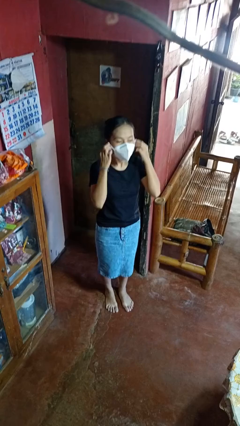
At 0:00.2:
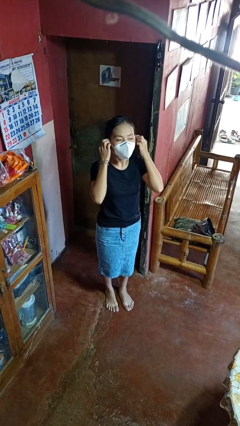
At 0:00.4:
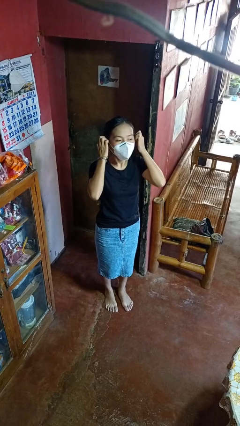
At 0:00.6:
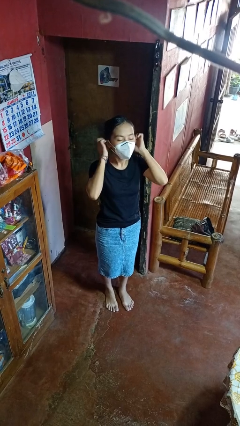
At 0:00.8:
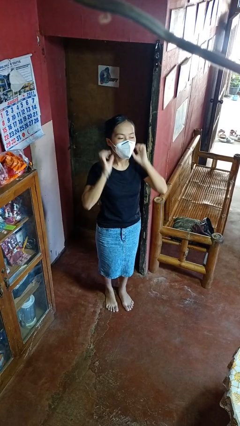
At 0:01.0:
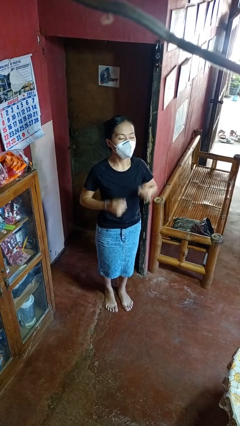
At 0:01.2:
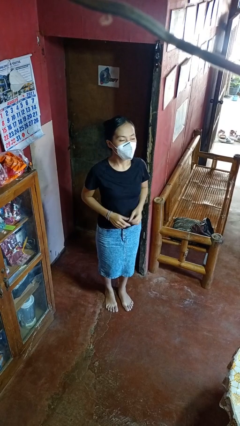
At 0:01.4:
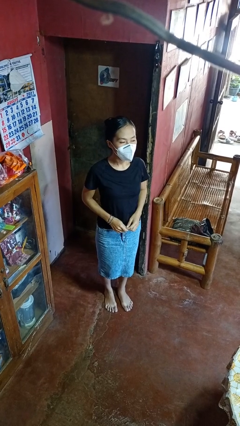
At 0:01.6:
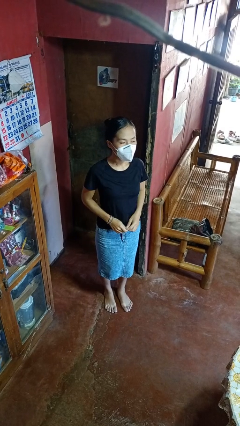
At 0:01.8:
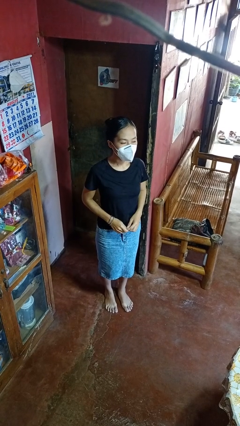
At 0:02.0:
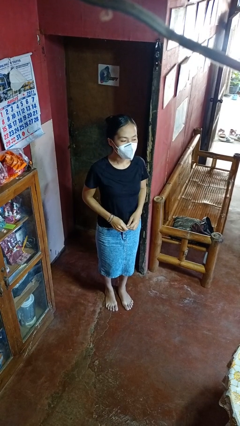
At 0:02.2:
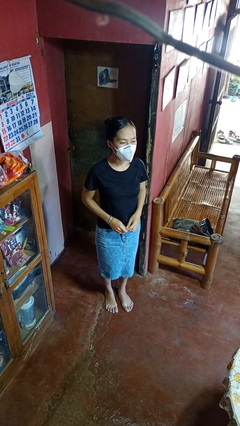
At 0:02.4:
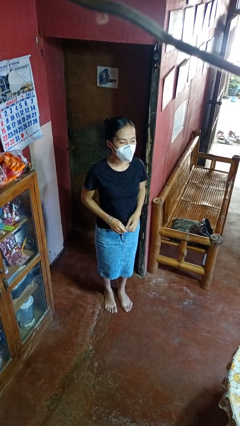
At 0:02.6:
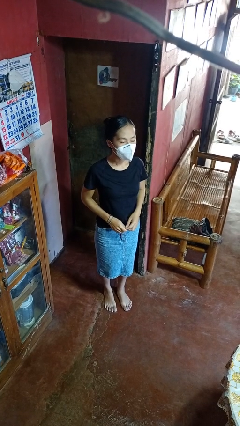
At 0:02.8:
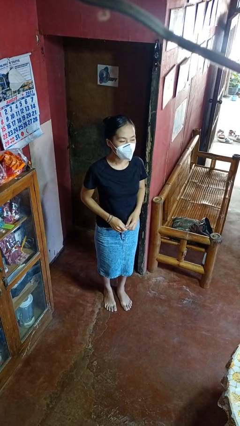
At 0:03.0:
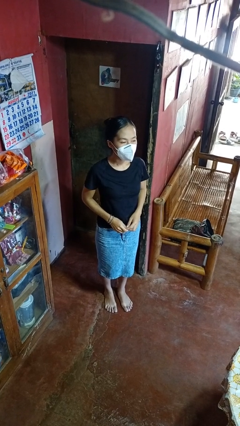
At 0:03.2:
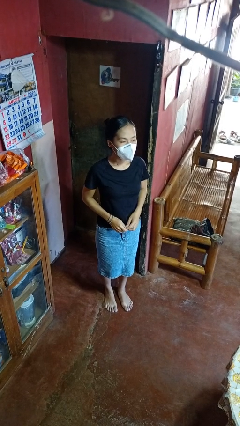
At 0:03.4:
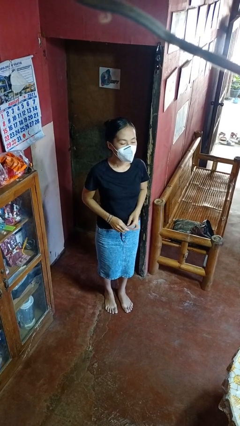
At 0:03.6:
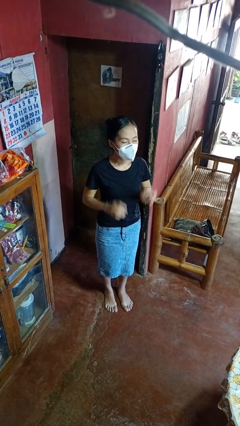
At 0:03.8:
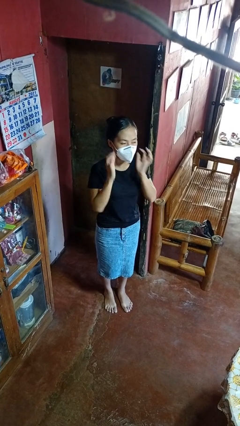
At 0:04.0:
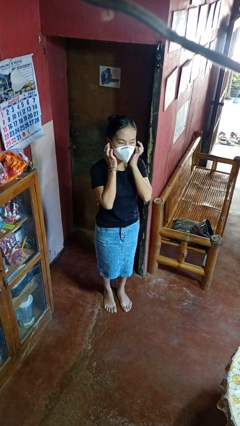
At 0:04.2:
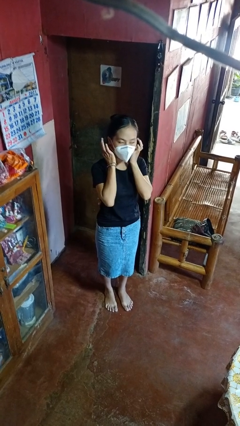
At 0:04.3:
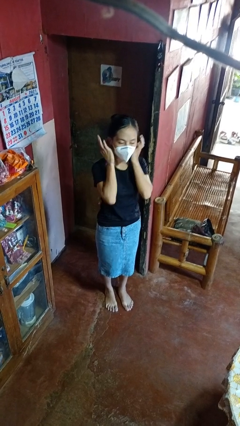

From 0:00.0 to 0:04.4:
person puts on facemask

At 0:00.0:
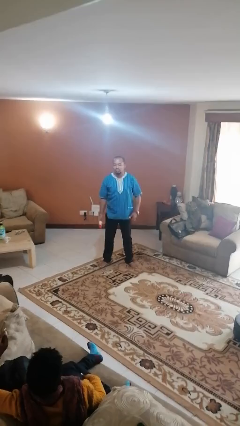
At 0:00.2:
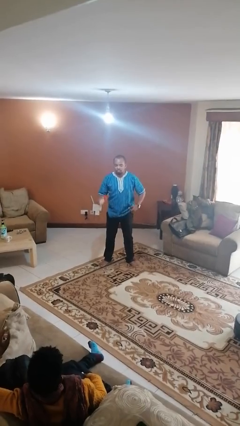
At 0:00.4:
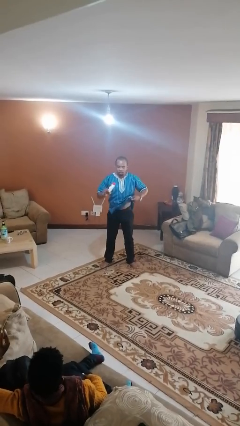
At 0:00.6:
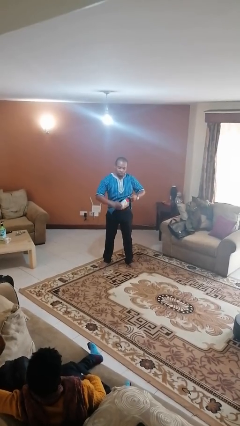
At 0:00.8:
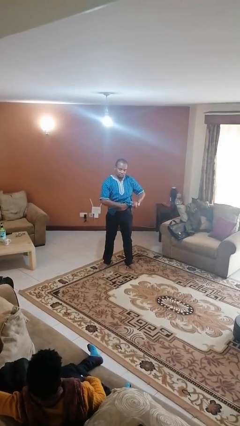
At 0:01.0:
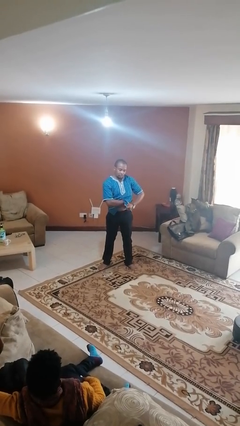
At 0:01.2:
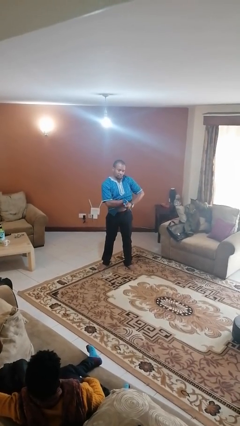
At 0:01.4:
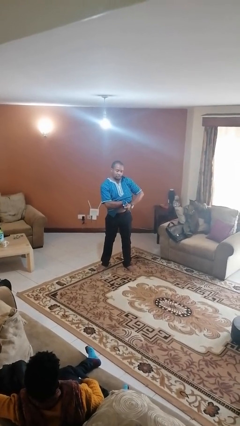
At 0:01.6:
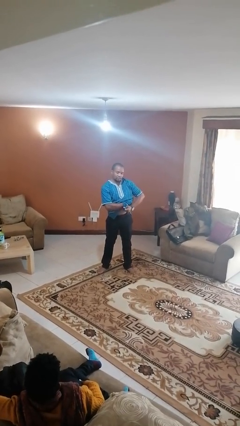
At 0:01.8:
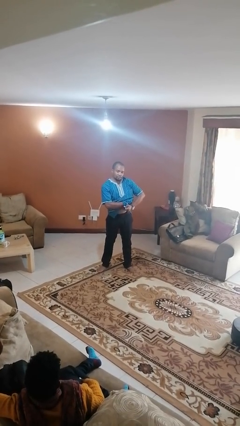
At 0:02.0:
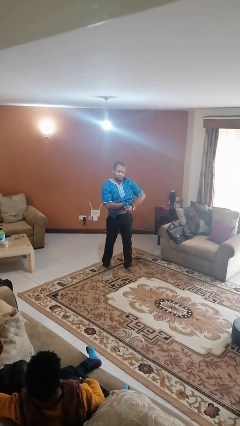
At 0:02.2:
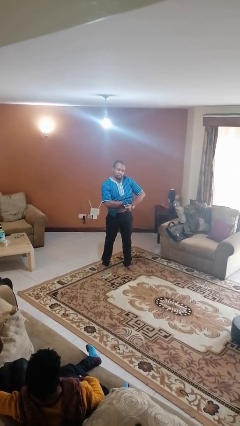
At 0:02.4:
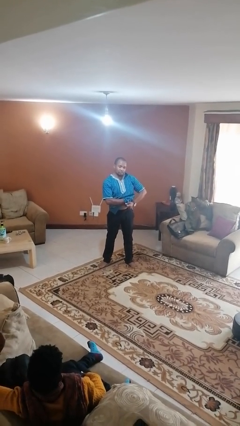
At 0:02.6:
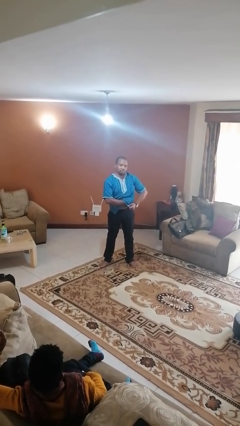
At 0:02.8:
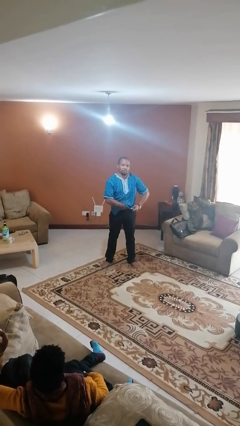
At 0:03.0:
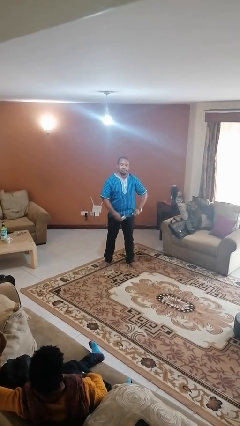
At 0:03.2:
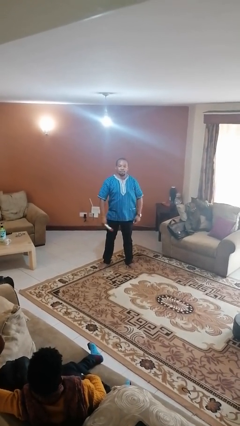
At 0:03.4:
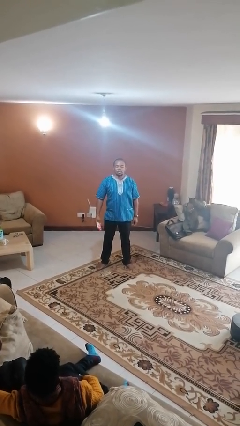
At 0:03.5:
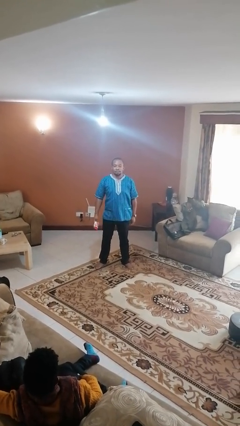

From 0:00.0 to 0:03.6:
person applies deodorant

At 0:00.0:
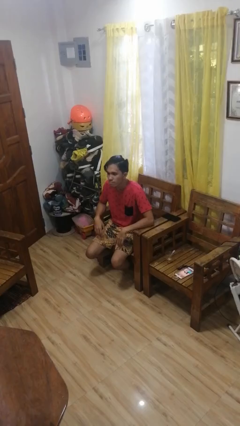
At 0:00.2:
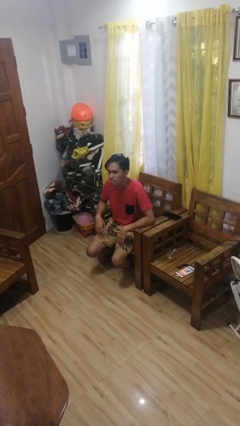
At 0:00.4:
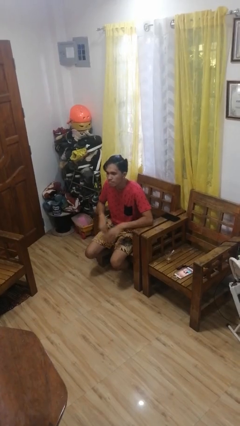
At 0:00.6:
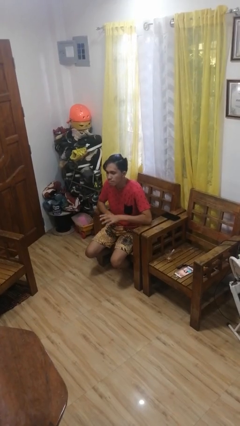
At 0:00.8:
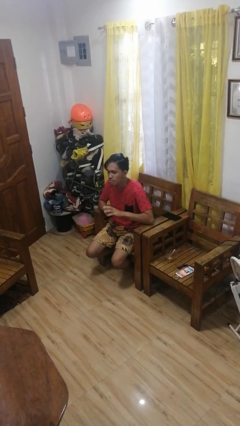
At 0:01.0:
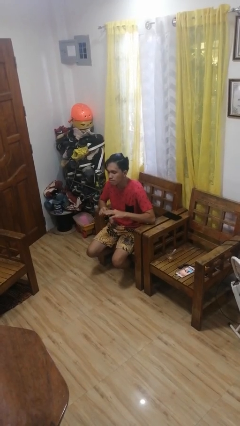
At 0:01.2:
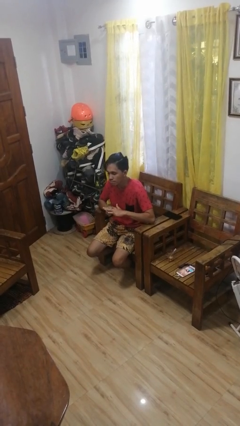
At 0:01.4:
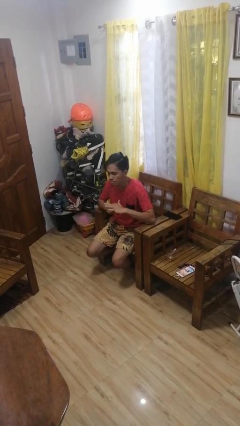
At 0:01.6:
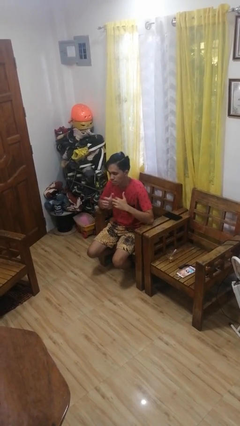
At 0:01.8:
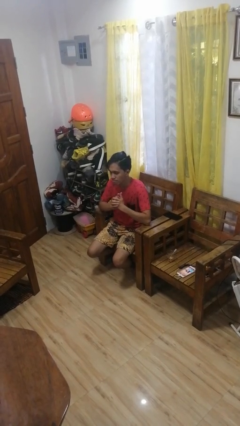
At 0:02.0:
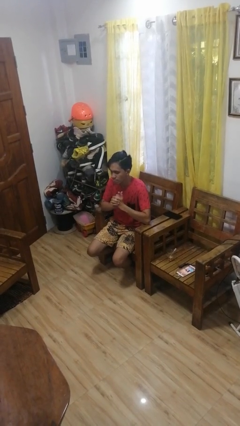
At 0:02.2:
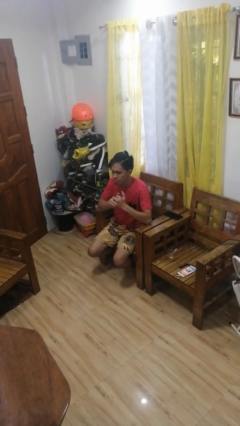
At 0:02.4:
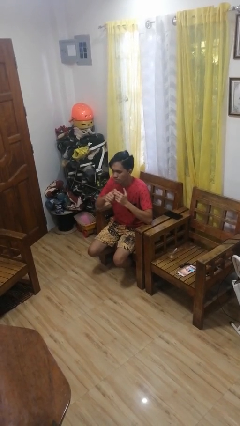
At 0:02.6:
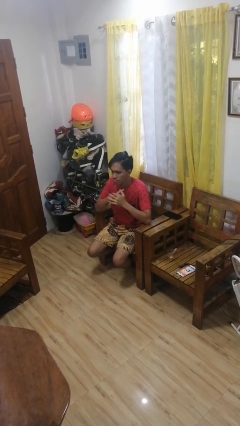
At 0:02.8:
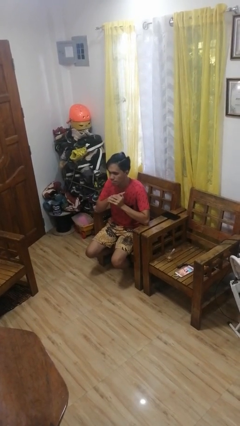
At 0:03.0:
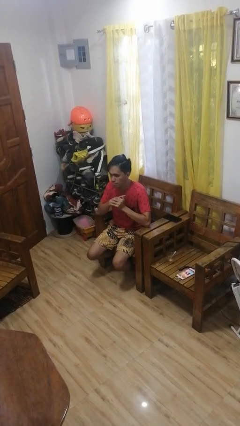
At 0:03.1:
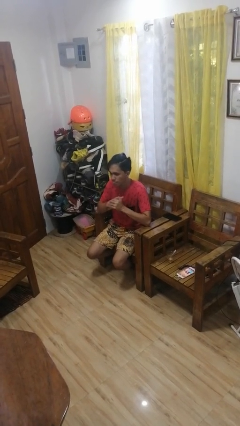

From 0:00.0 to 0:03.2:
person cracks knuckles

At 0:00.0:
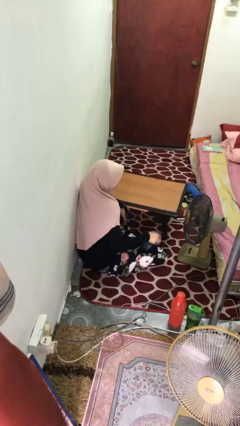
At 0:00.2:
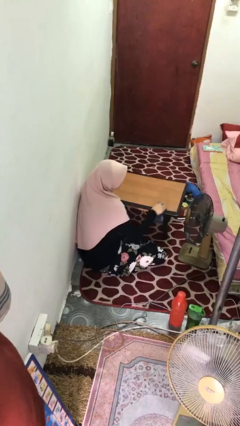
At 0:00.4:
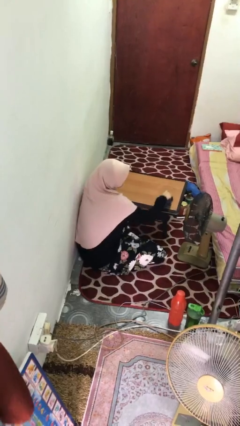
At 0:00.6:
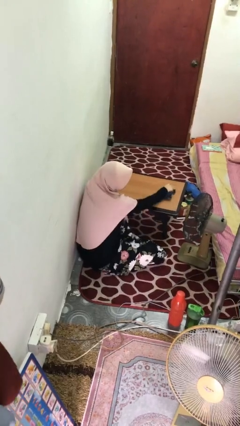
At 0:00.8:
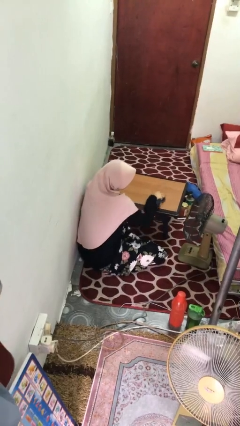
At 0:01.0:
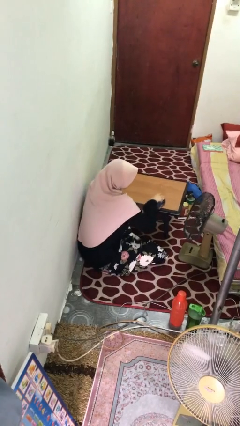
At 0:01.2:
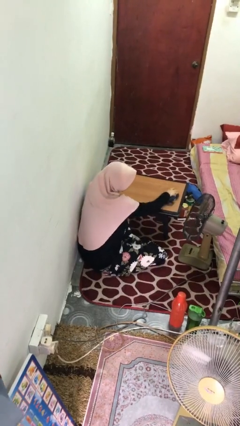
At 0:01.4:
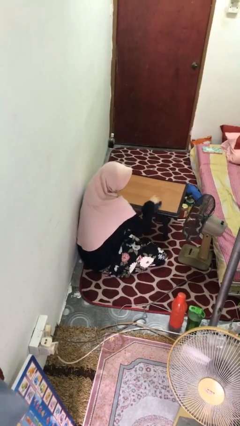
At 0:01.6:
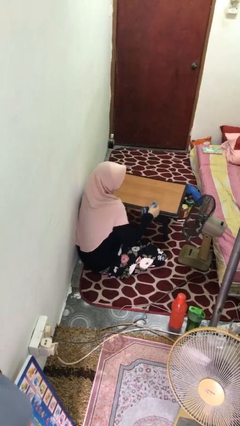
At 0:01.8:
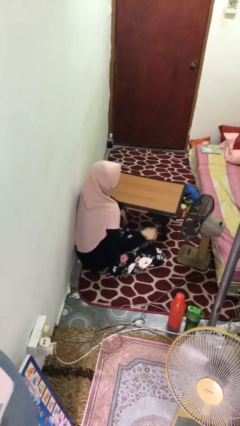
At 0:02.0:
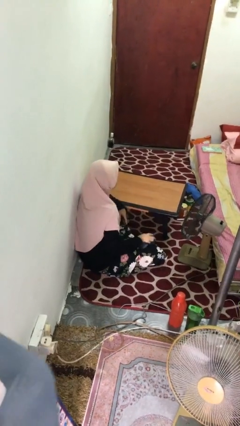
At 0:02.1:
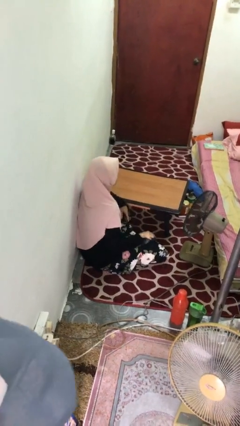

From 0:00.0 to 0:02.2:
person cleans table with rag

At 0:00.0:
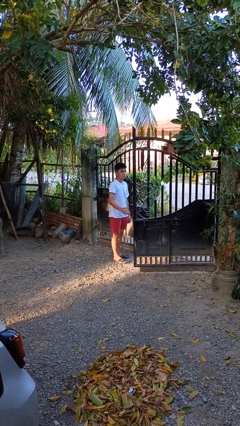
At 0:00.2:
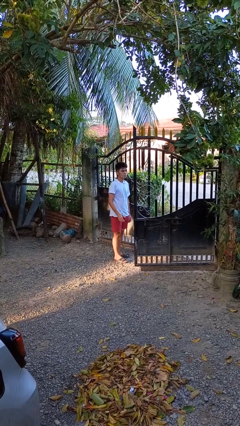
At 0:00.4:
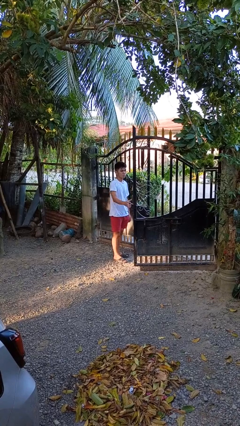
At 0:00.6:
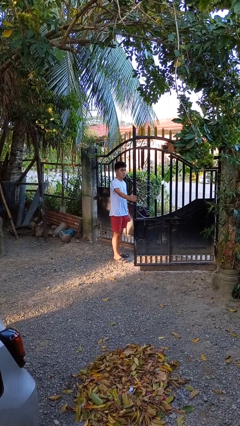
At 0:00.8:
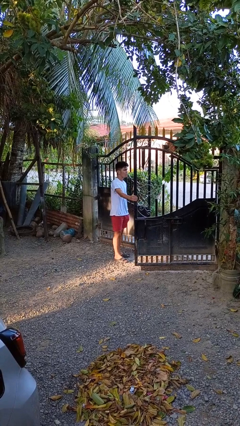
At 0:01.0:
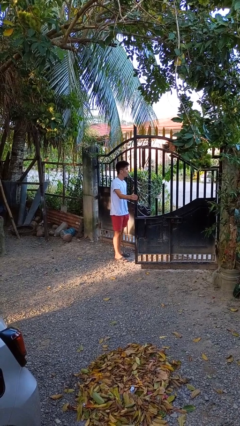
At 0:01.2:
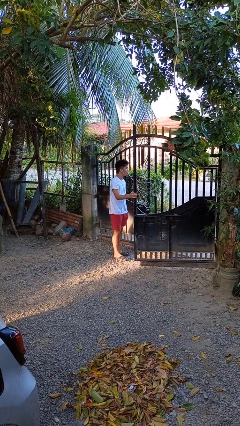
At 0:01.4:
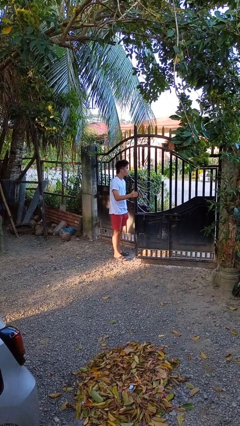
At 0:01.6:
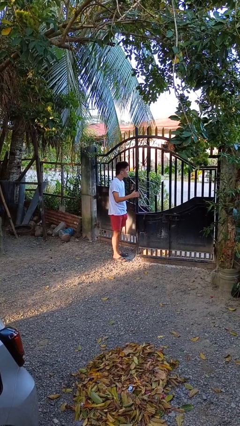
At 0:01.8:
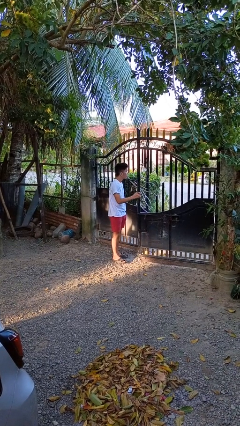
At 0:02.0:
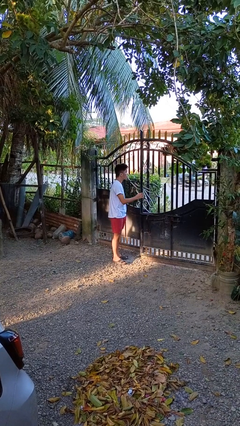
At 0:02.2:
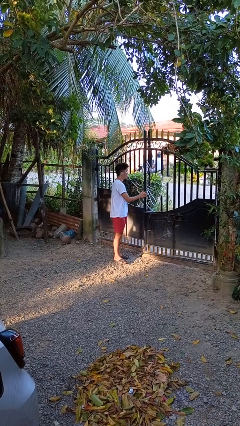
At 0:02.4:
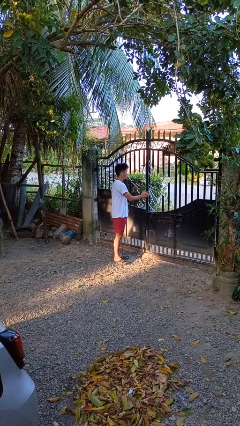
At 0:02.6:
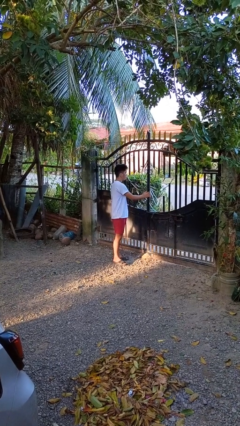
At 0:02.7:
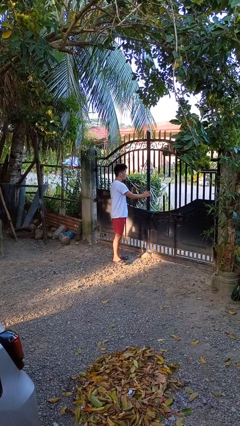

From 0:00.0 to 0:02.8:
person closes gate

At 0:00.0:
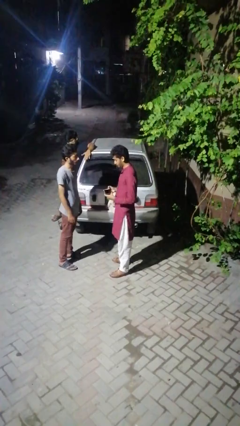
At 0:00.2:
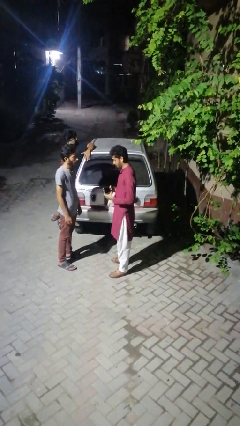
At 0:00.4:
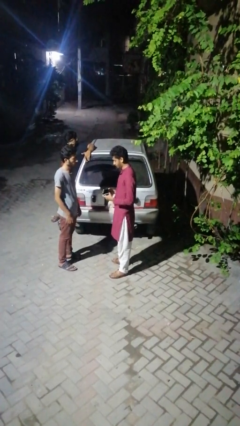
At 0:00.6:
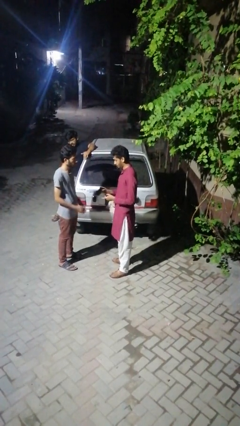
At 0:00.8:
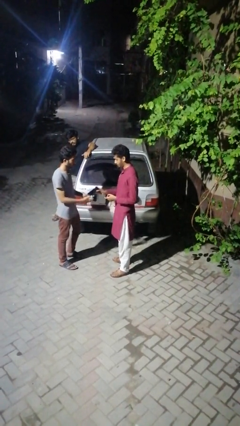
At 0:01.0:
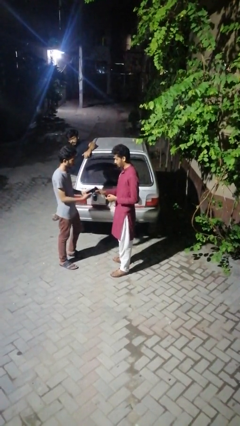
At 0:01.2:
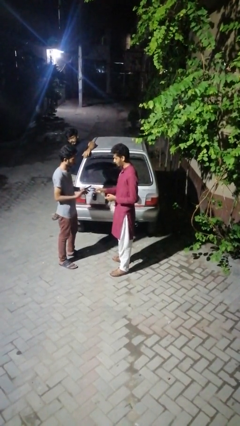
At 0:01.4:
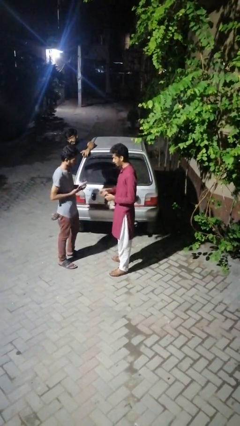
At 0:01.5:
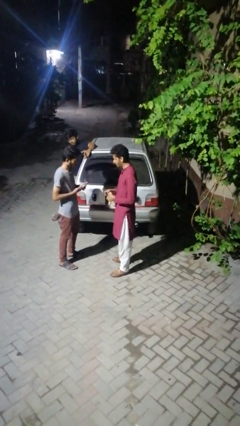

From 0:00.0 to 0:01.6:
person transfers object to person
